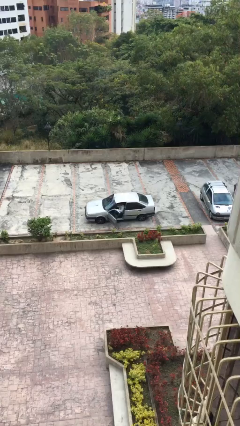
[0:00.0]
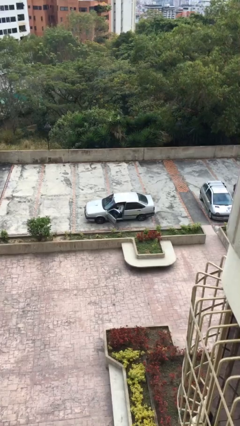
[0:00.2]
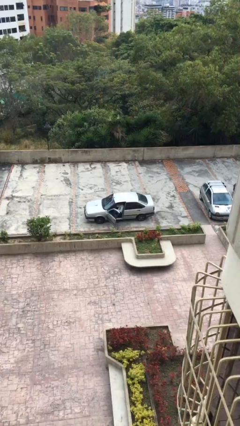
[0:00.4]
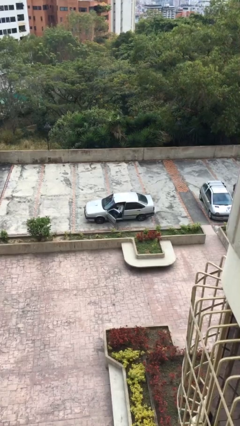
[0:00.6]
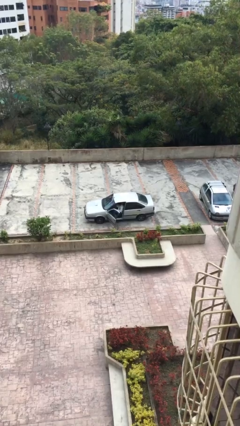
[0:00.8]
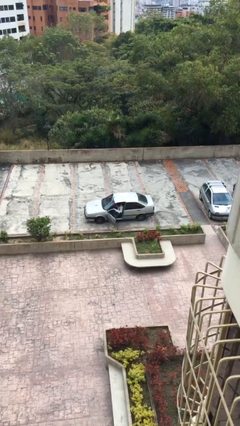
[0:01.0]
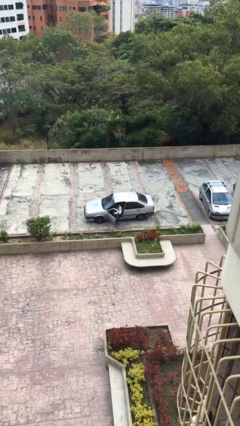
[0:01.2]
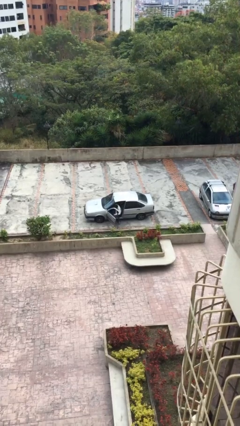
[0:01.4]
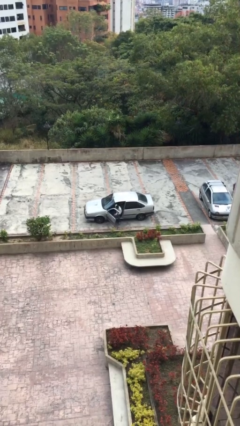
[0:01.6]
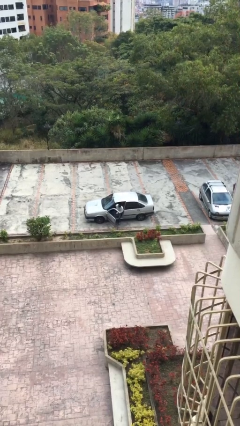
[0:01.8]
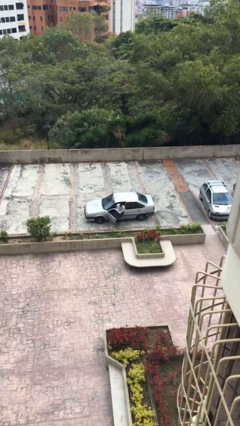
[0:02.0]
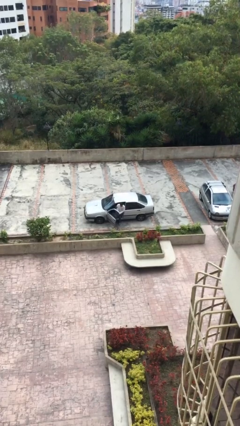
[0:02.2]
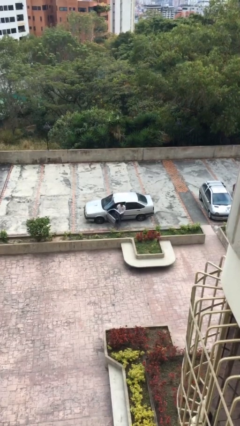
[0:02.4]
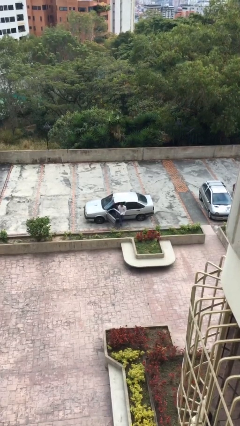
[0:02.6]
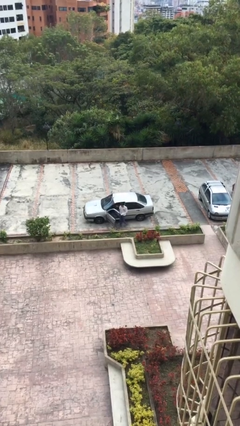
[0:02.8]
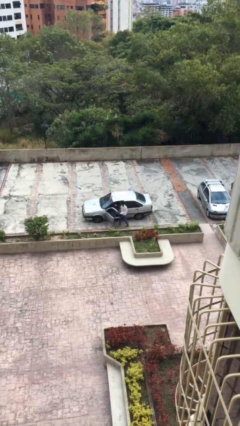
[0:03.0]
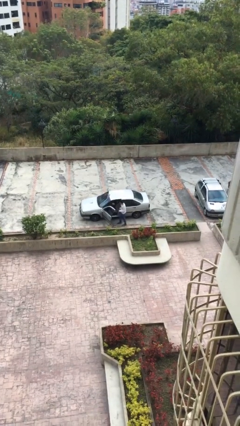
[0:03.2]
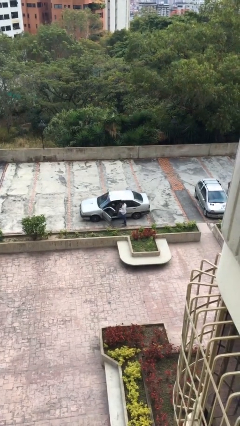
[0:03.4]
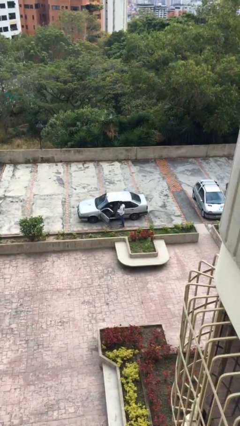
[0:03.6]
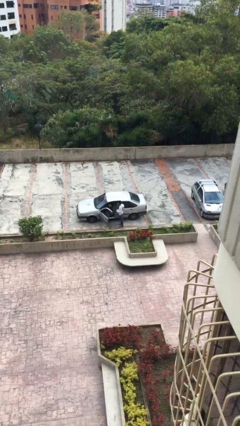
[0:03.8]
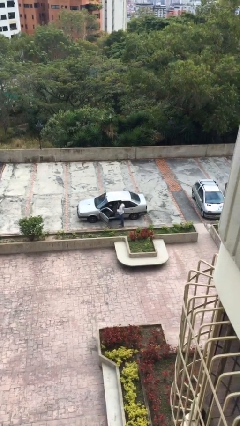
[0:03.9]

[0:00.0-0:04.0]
person exits car

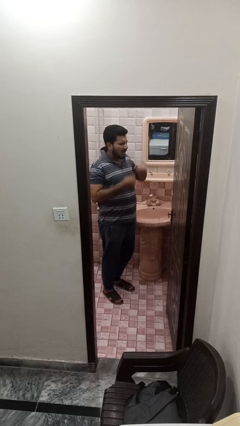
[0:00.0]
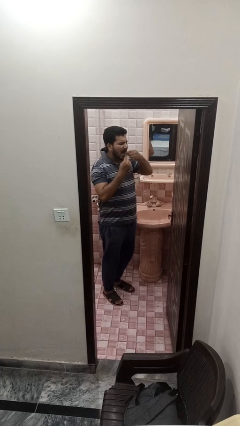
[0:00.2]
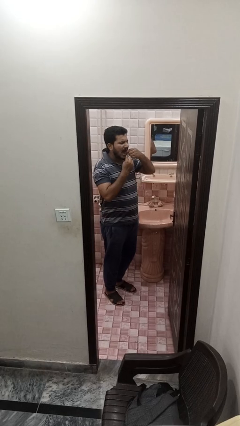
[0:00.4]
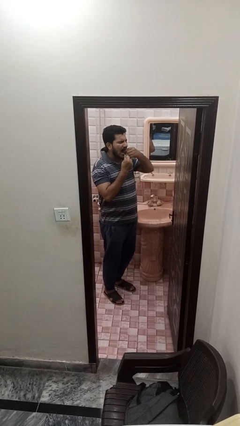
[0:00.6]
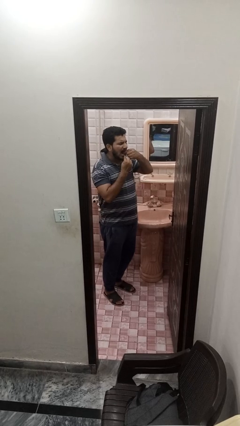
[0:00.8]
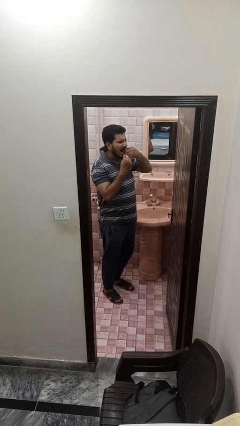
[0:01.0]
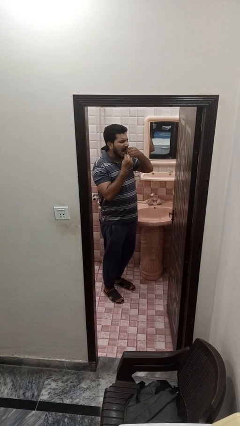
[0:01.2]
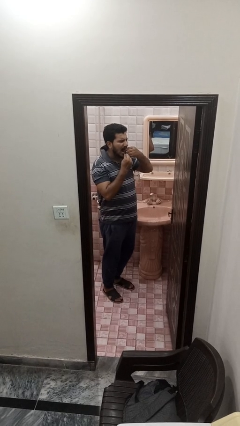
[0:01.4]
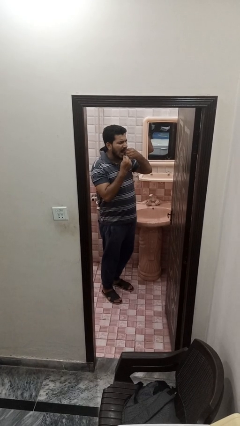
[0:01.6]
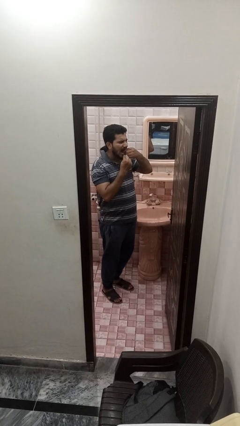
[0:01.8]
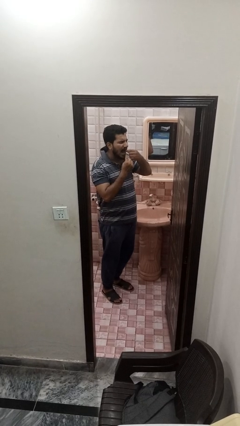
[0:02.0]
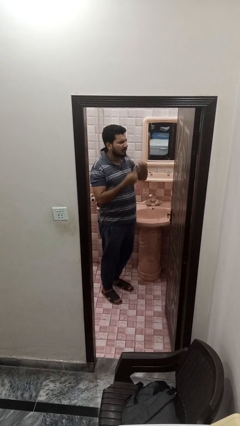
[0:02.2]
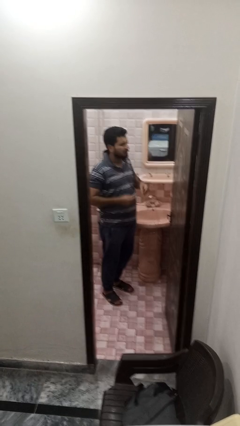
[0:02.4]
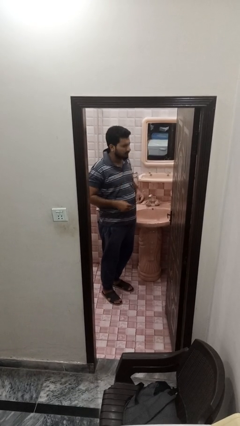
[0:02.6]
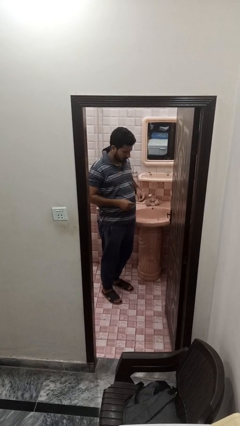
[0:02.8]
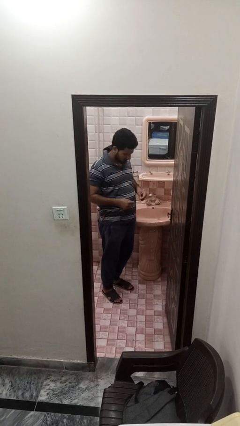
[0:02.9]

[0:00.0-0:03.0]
person flosses

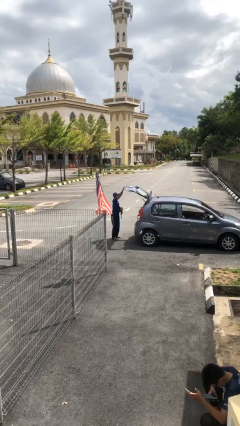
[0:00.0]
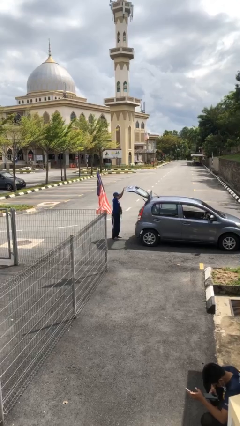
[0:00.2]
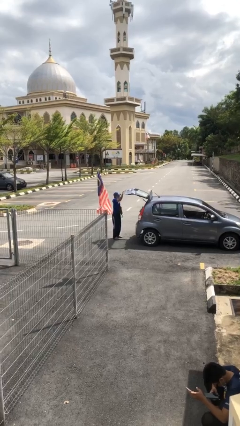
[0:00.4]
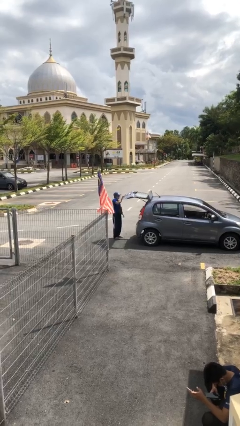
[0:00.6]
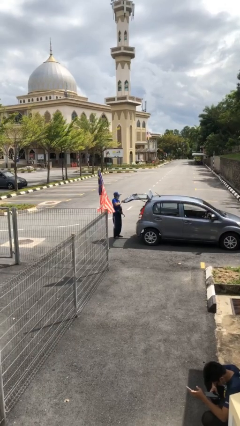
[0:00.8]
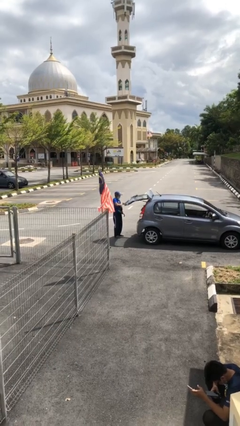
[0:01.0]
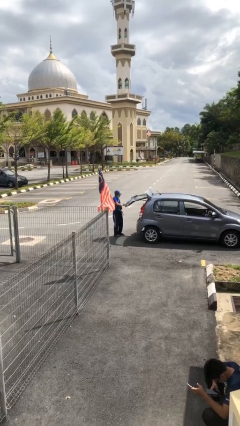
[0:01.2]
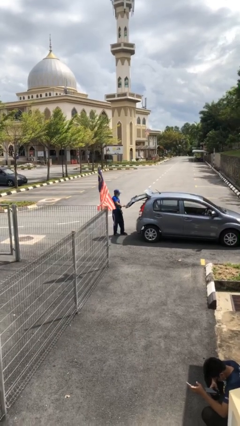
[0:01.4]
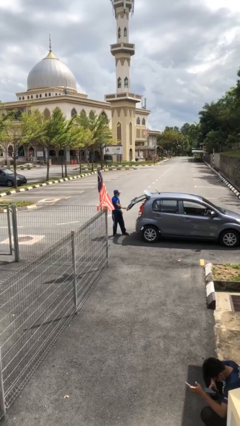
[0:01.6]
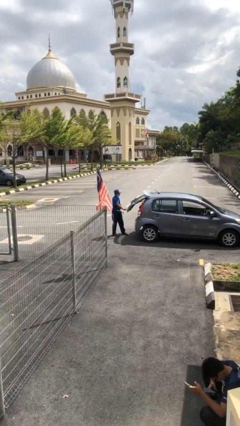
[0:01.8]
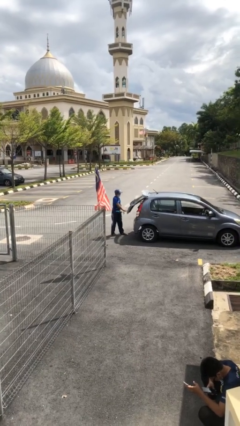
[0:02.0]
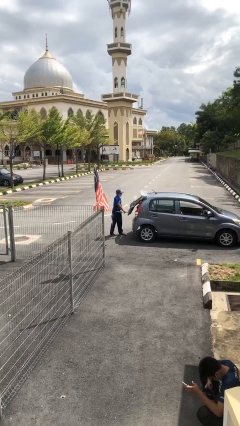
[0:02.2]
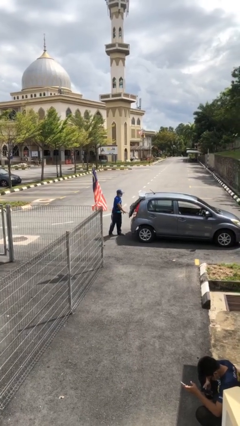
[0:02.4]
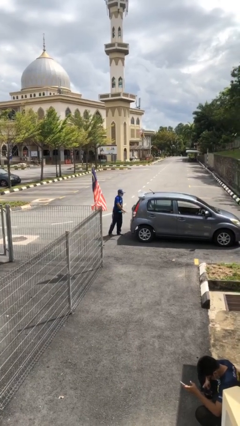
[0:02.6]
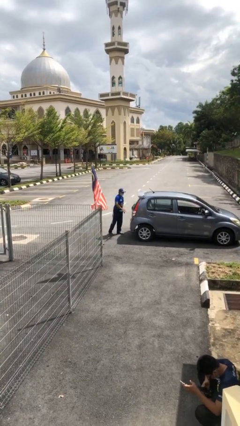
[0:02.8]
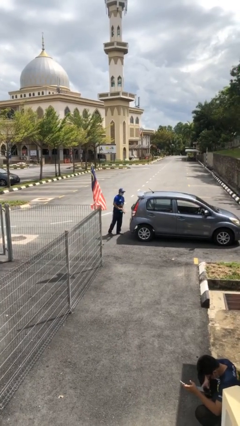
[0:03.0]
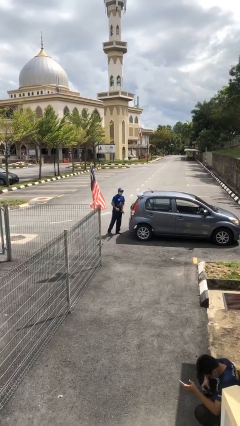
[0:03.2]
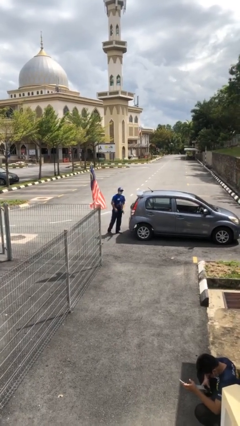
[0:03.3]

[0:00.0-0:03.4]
person closes car trunk

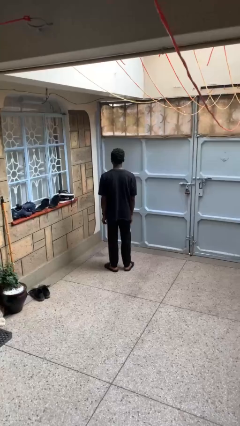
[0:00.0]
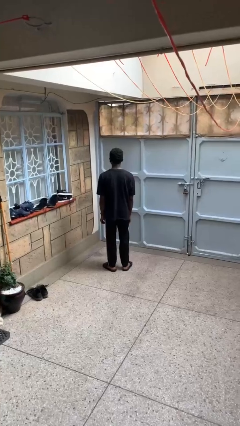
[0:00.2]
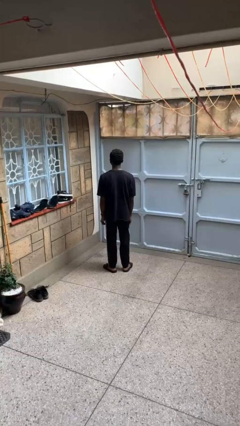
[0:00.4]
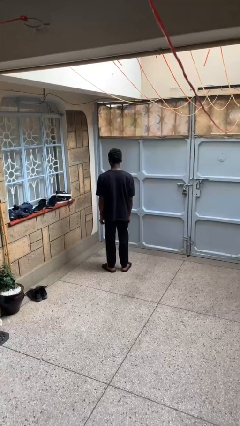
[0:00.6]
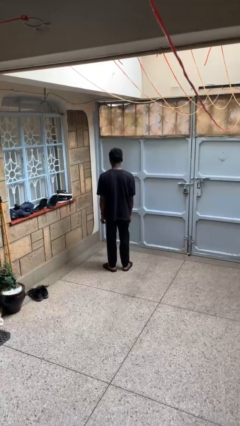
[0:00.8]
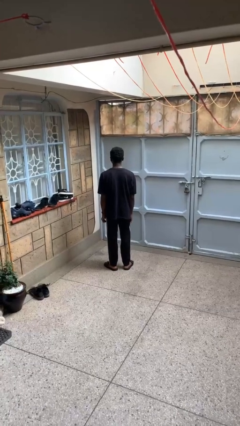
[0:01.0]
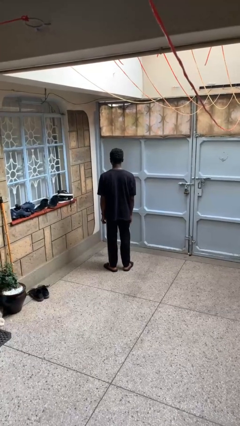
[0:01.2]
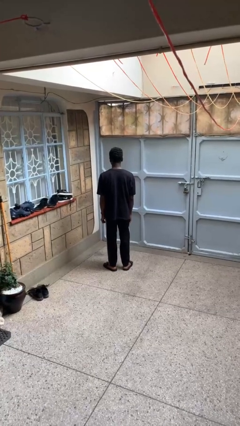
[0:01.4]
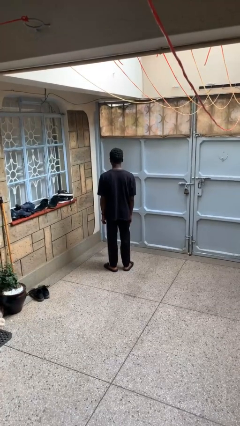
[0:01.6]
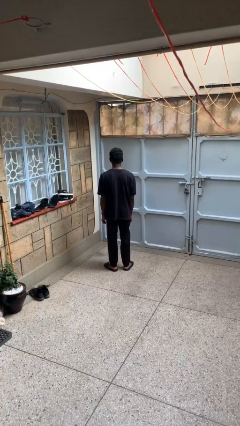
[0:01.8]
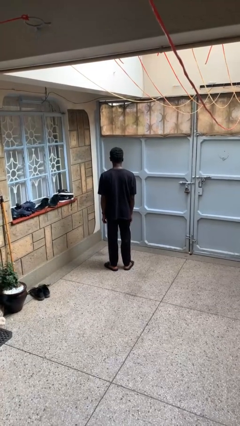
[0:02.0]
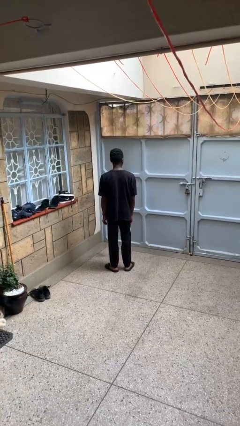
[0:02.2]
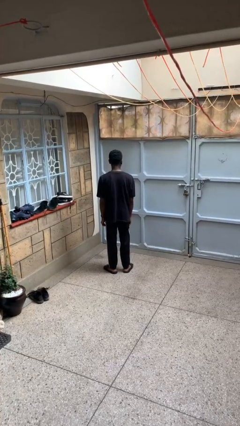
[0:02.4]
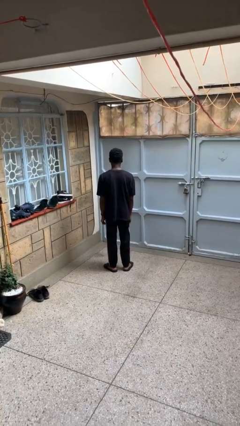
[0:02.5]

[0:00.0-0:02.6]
person nods head

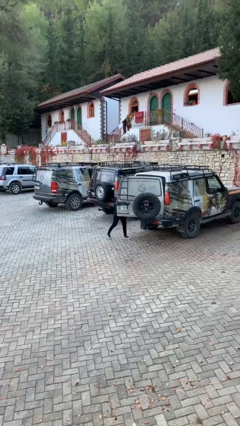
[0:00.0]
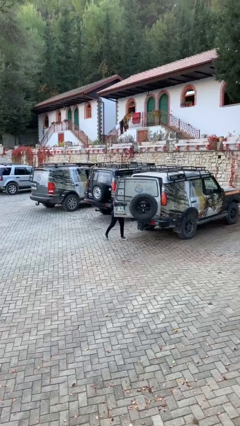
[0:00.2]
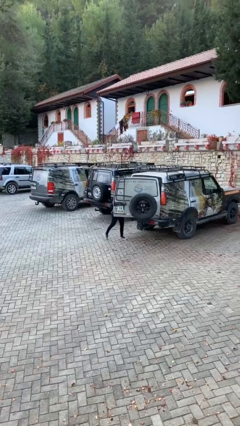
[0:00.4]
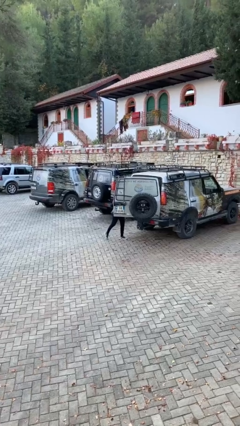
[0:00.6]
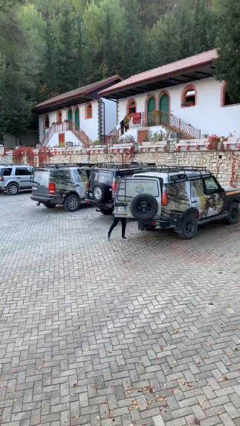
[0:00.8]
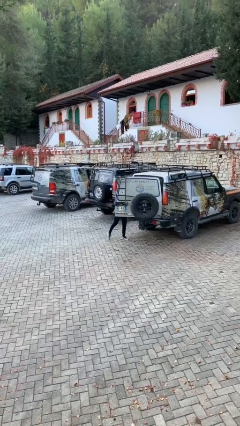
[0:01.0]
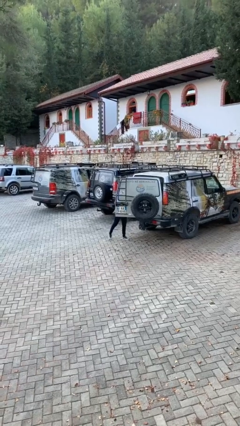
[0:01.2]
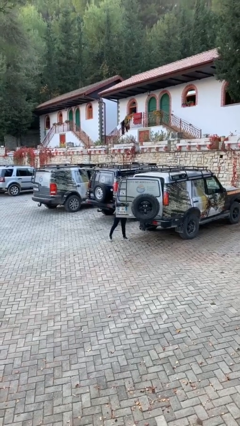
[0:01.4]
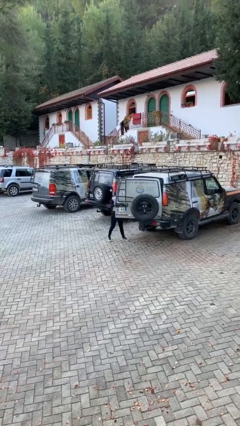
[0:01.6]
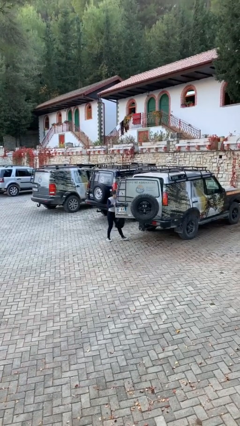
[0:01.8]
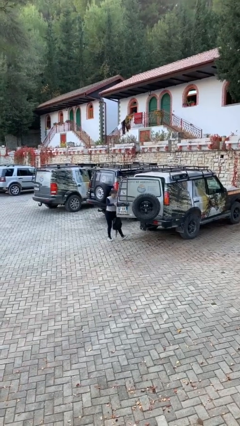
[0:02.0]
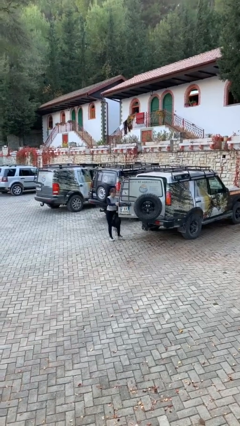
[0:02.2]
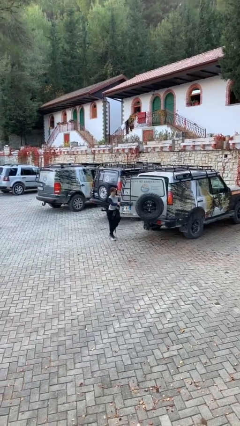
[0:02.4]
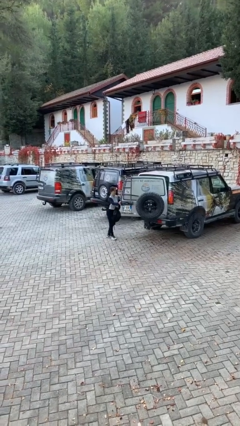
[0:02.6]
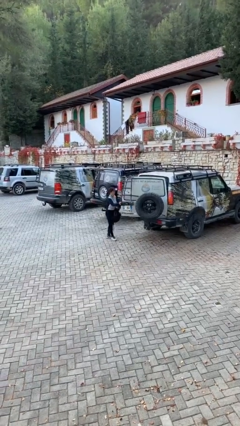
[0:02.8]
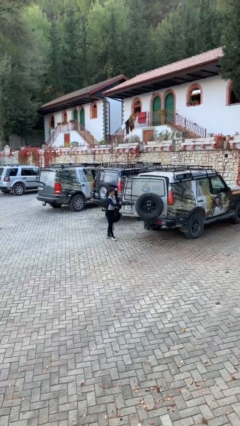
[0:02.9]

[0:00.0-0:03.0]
person unloads car

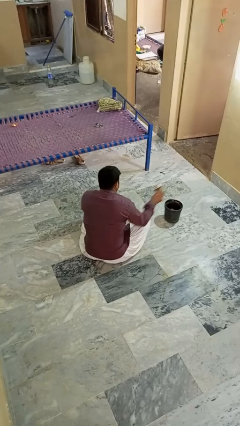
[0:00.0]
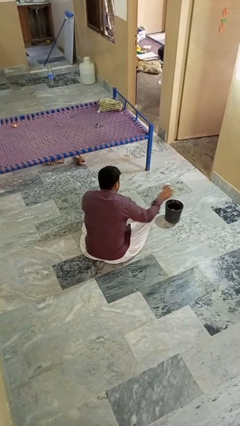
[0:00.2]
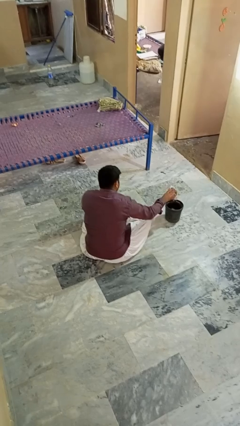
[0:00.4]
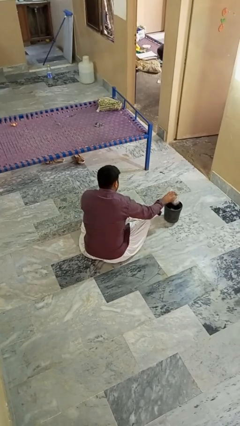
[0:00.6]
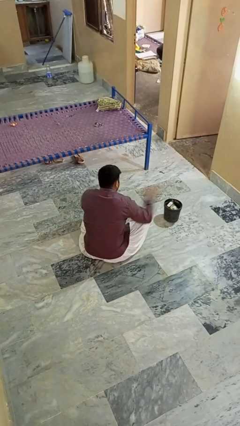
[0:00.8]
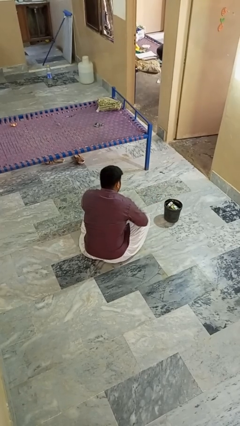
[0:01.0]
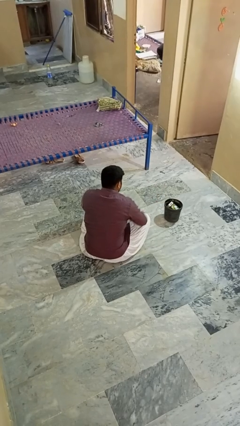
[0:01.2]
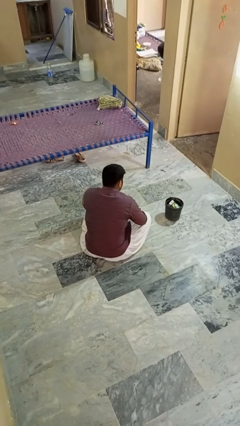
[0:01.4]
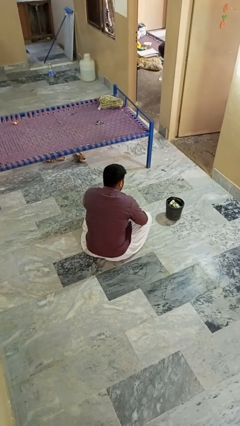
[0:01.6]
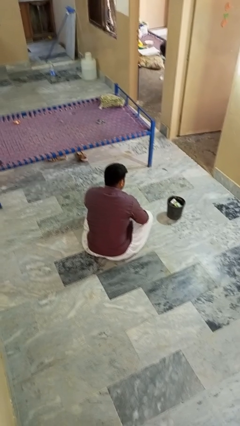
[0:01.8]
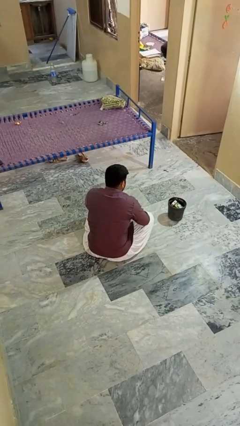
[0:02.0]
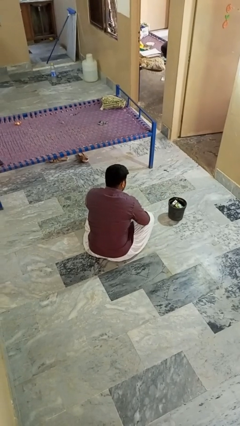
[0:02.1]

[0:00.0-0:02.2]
person puts object into basket
